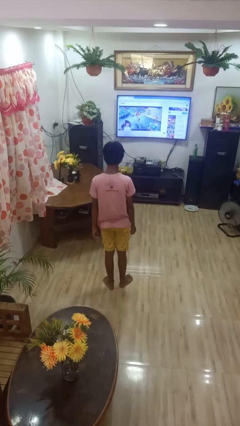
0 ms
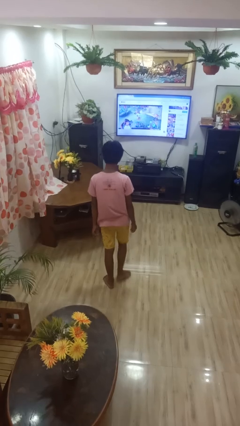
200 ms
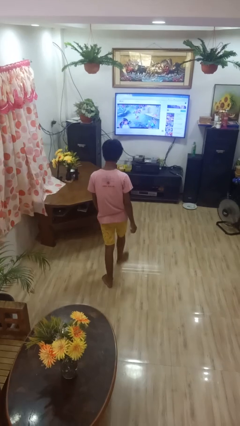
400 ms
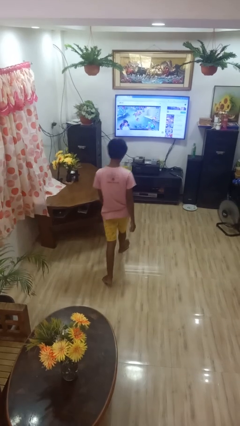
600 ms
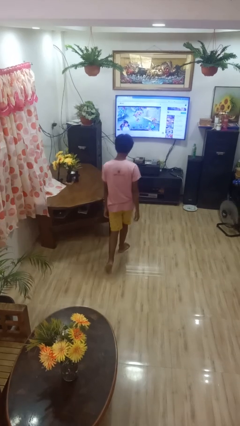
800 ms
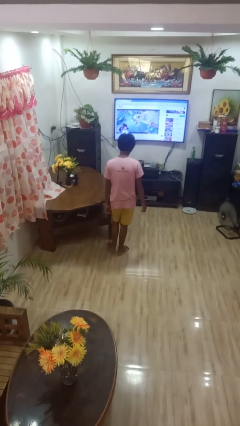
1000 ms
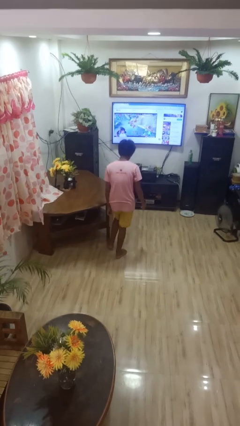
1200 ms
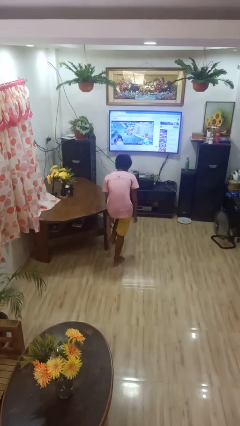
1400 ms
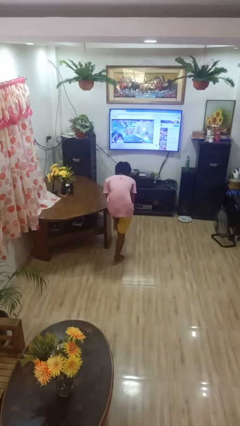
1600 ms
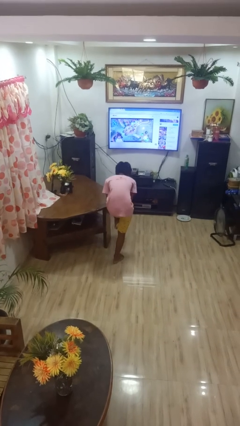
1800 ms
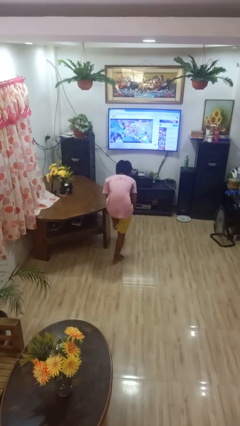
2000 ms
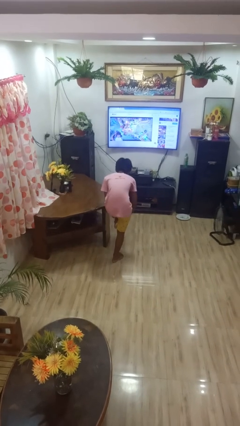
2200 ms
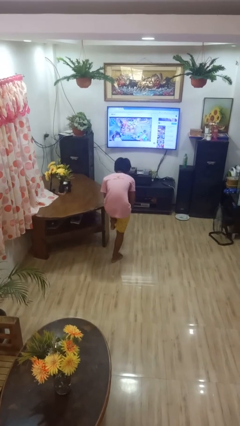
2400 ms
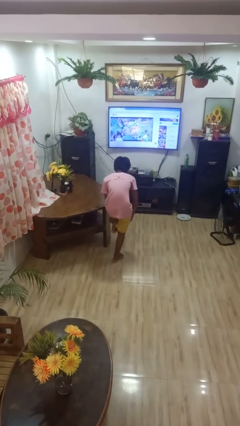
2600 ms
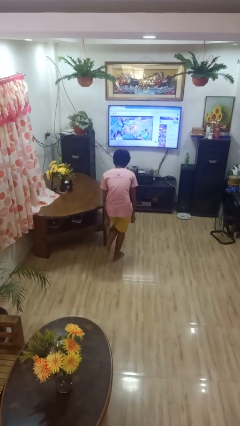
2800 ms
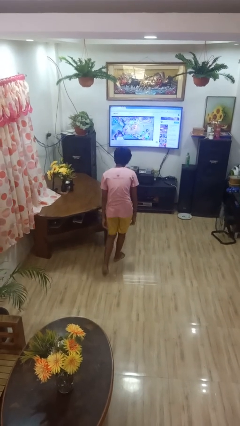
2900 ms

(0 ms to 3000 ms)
person stubs toe

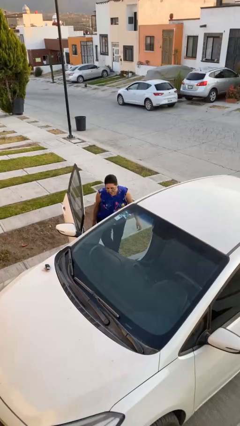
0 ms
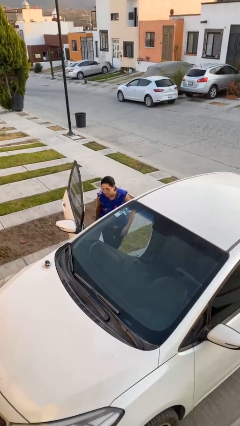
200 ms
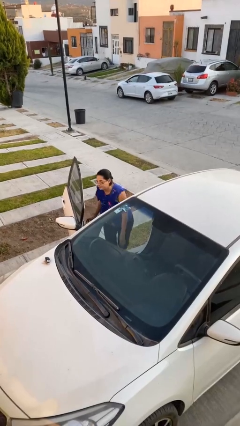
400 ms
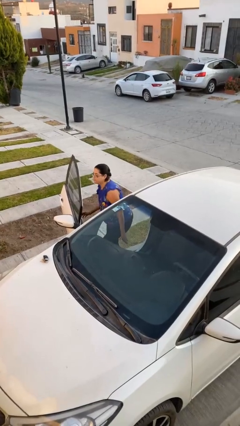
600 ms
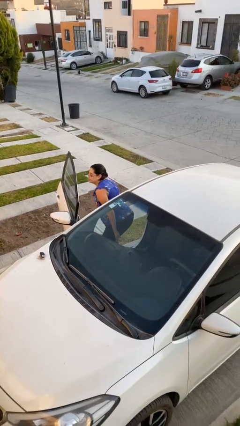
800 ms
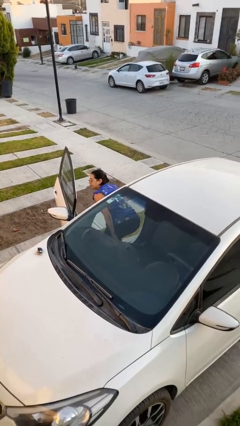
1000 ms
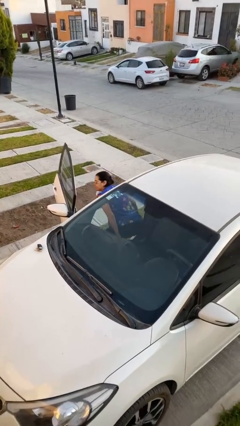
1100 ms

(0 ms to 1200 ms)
person enters car

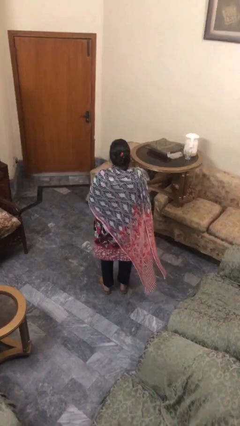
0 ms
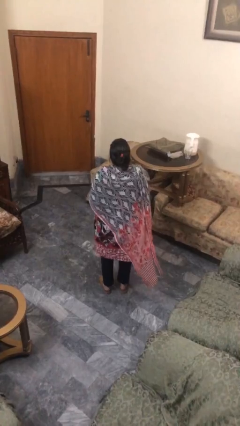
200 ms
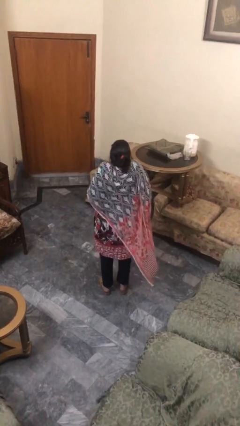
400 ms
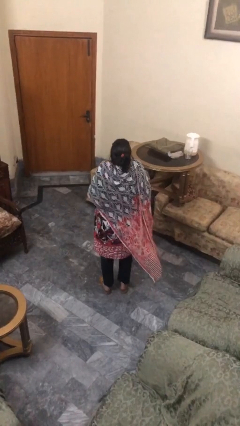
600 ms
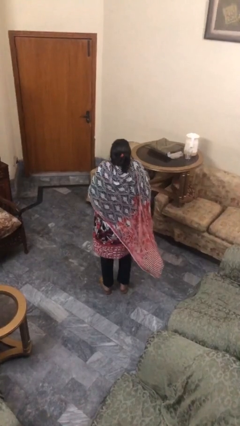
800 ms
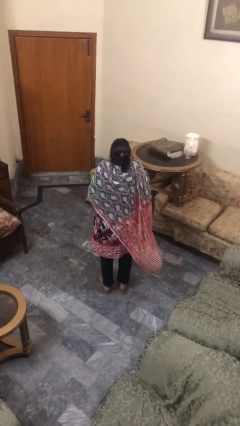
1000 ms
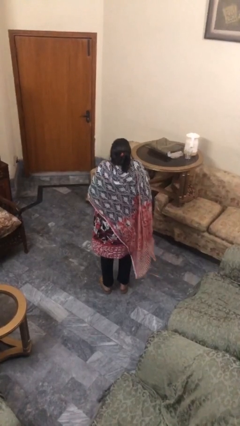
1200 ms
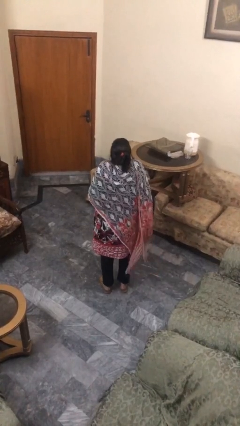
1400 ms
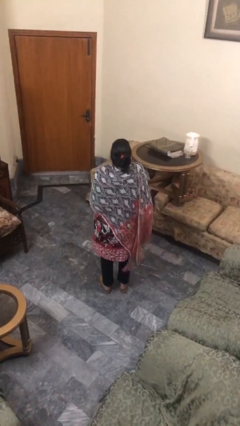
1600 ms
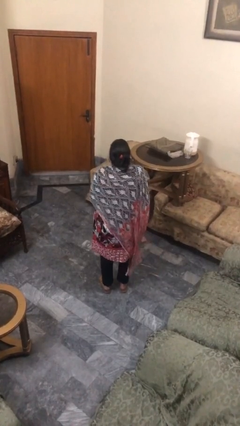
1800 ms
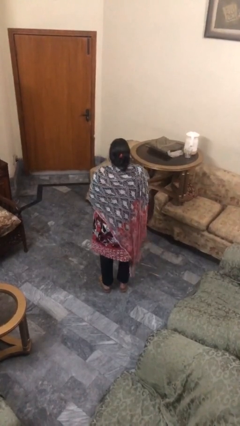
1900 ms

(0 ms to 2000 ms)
person shrugs

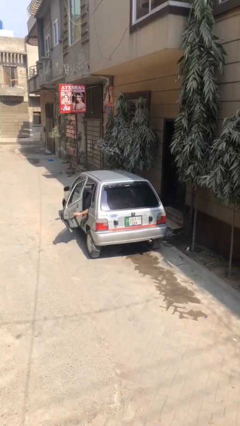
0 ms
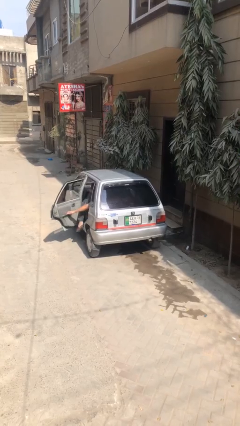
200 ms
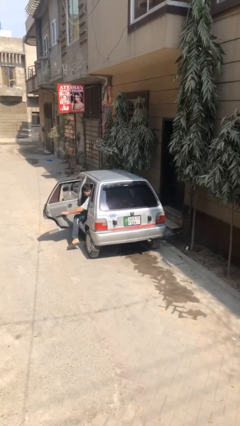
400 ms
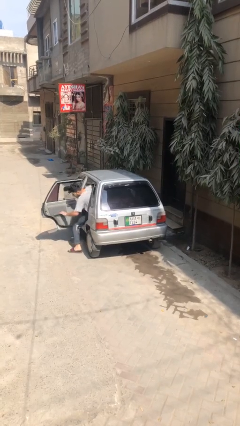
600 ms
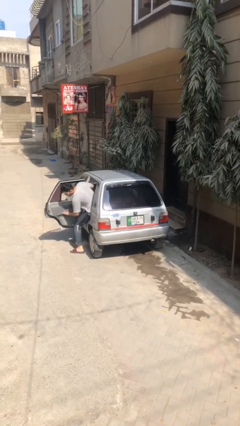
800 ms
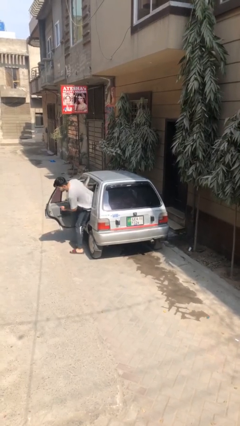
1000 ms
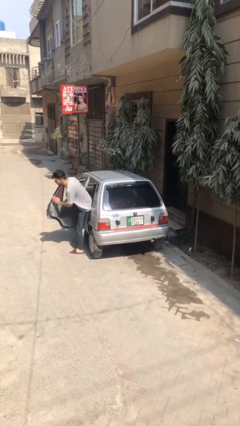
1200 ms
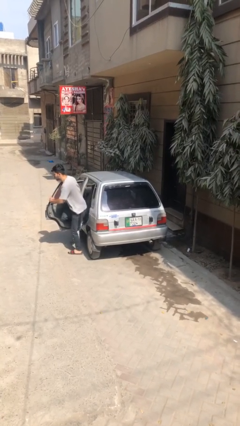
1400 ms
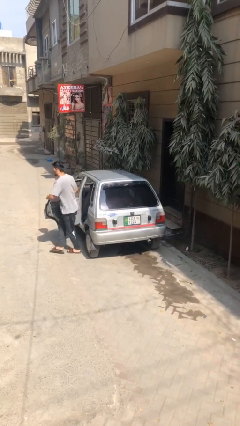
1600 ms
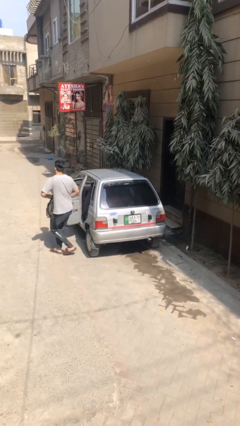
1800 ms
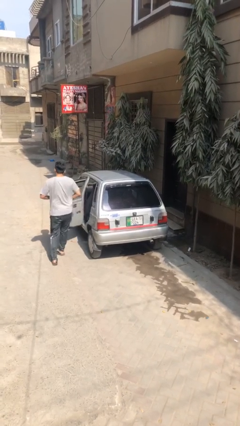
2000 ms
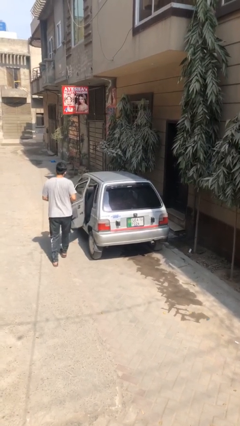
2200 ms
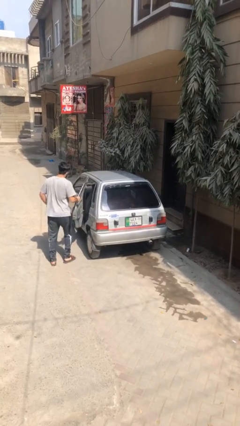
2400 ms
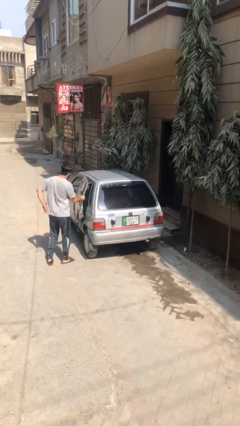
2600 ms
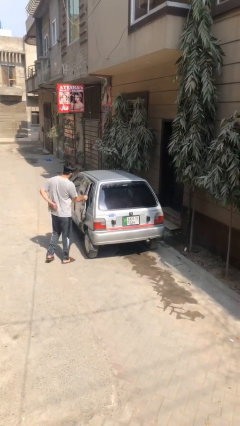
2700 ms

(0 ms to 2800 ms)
car drops off person

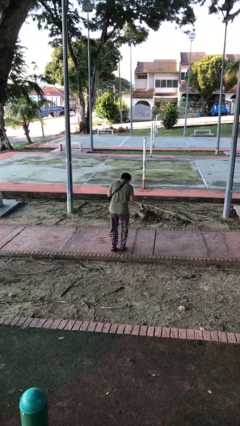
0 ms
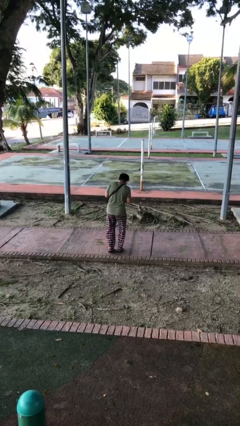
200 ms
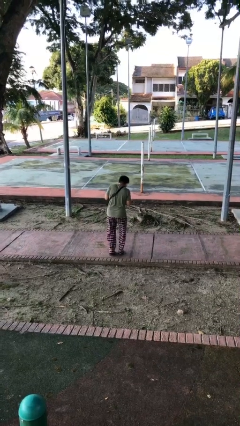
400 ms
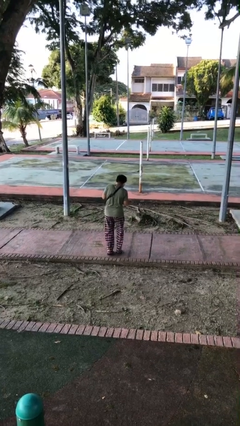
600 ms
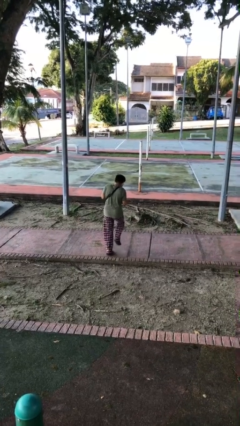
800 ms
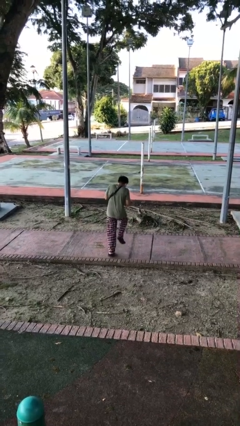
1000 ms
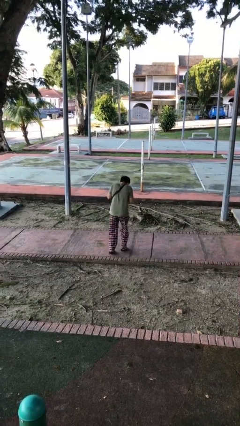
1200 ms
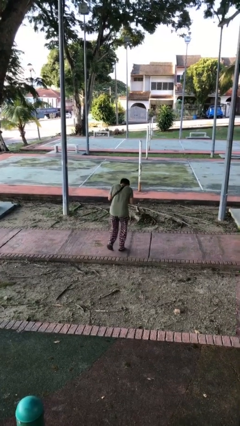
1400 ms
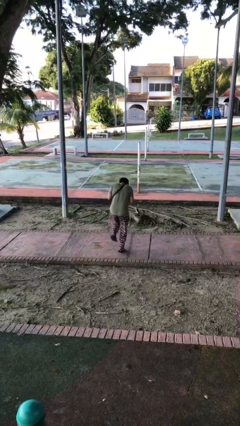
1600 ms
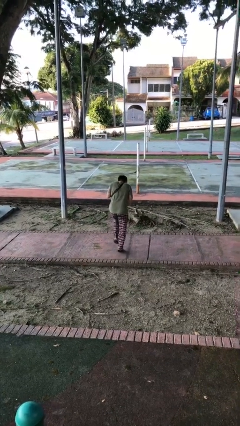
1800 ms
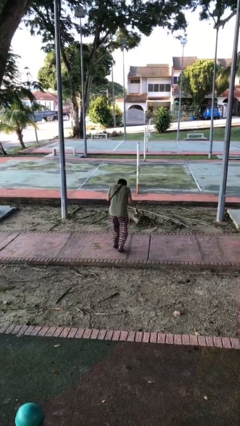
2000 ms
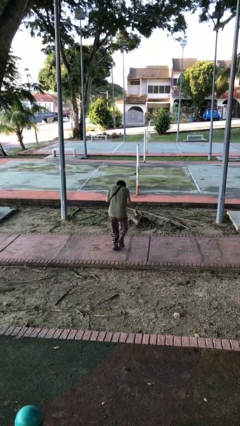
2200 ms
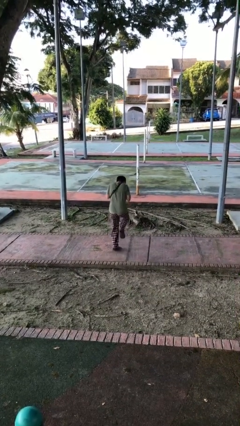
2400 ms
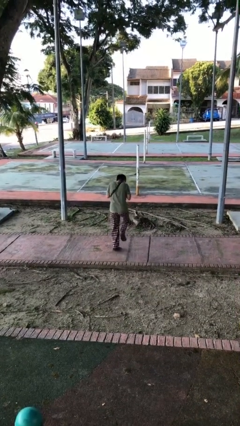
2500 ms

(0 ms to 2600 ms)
person walks tiptoe

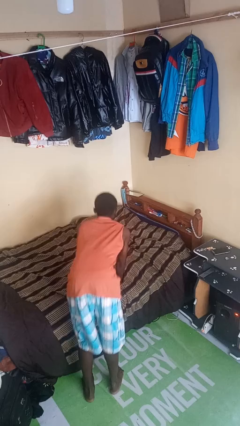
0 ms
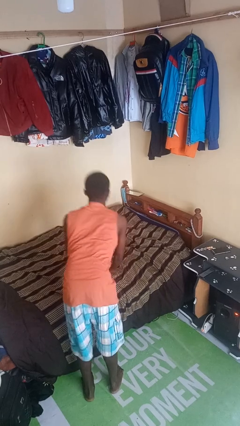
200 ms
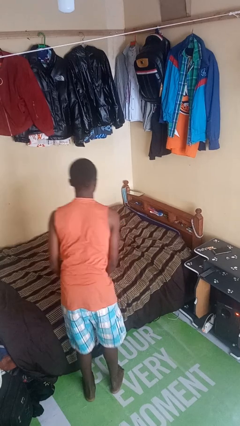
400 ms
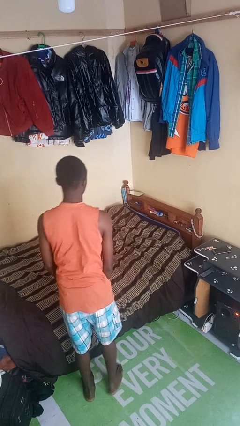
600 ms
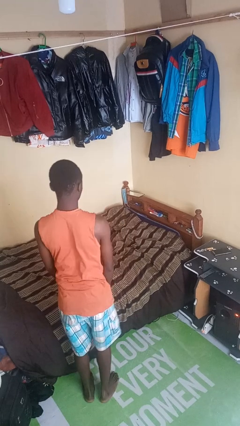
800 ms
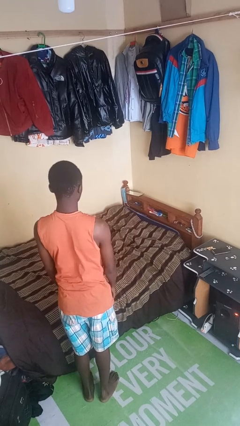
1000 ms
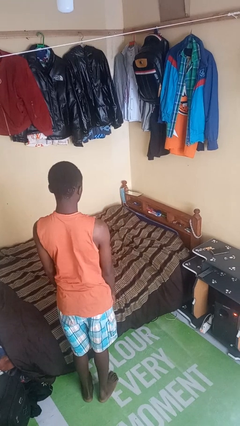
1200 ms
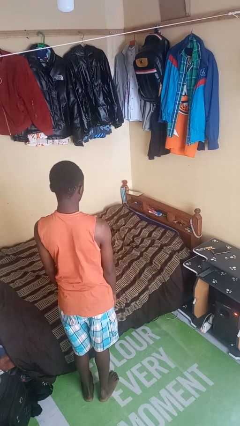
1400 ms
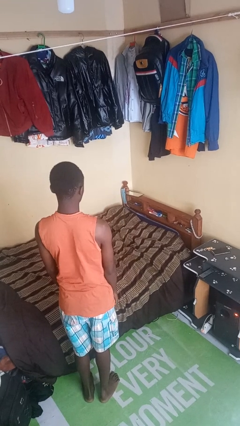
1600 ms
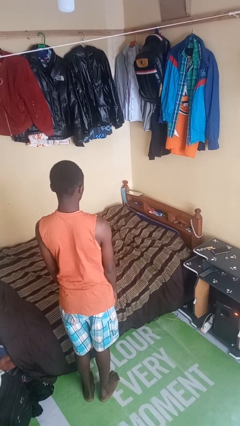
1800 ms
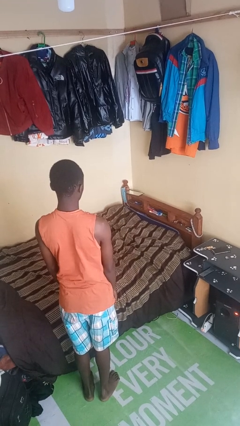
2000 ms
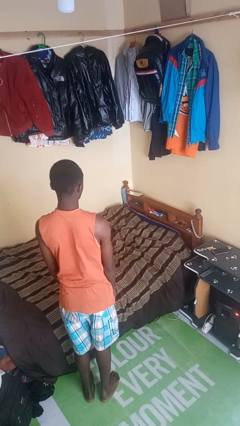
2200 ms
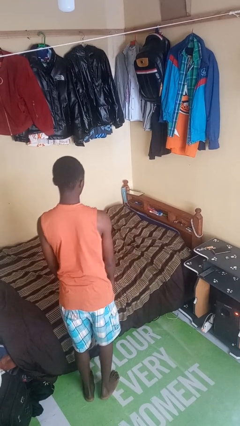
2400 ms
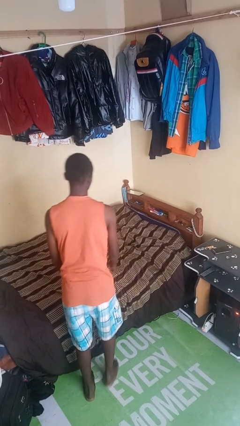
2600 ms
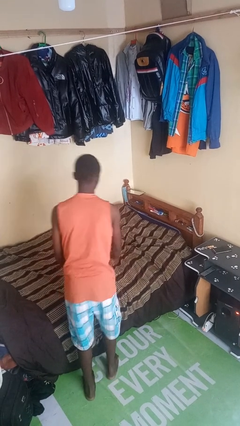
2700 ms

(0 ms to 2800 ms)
person stands up

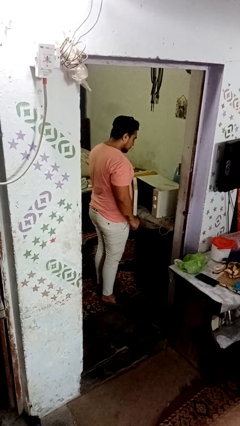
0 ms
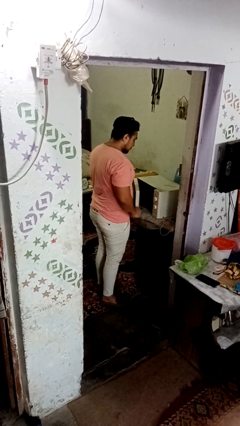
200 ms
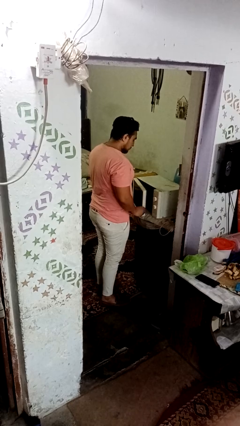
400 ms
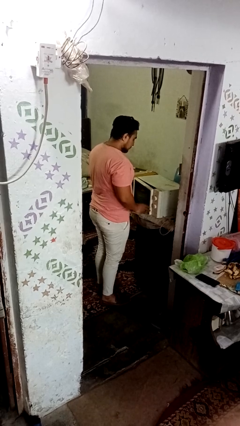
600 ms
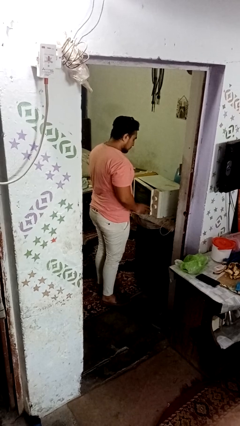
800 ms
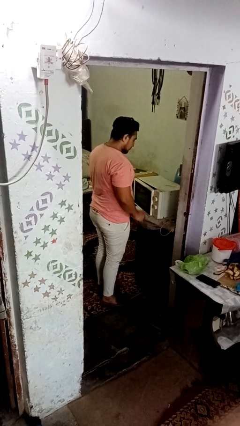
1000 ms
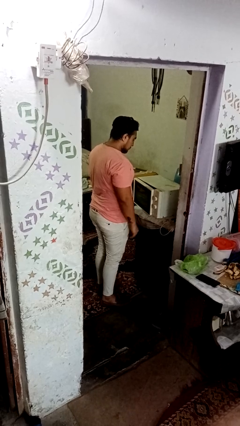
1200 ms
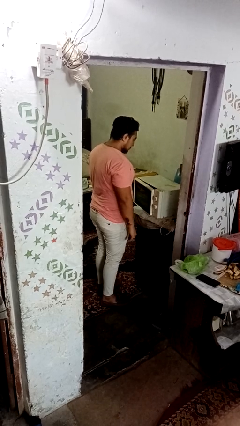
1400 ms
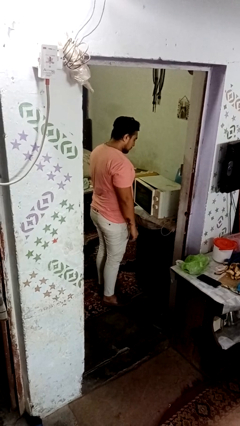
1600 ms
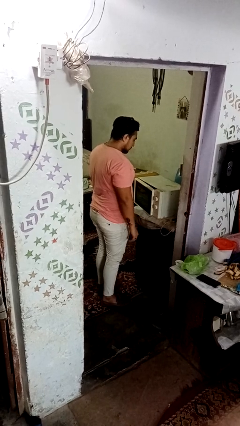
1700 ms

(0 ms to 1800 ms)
person closes dishwasher

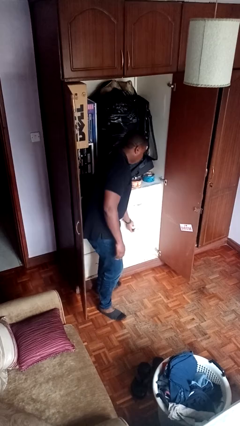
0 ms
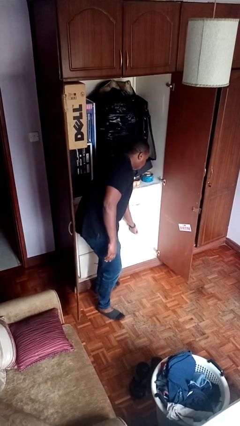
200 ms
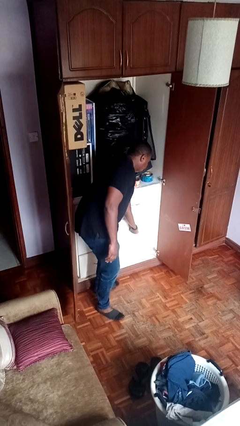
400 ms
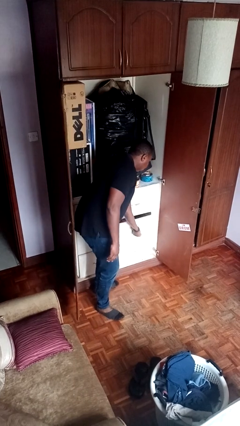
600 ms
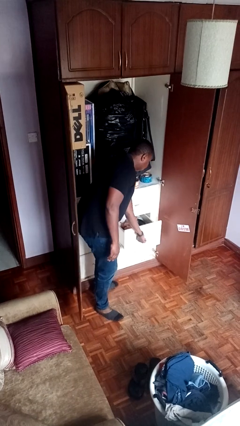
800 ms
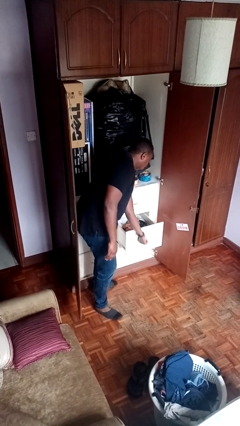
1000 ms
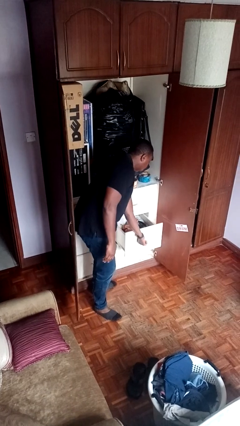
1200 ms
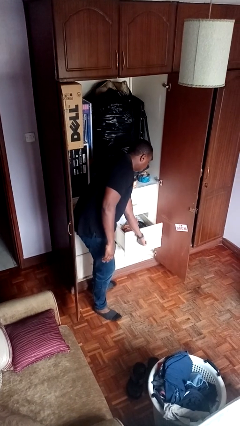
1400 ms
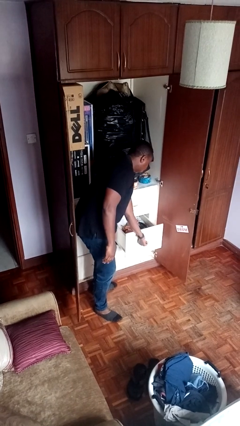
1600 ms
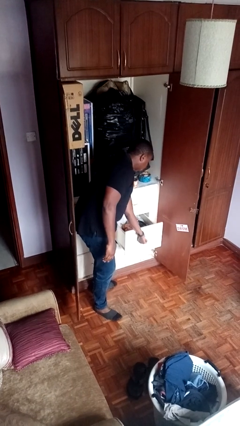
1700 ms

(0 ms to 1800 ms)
person opens dresser drawer
